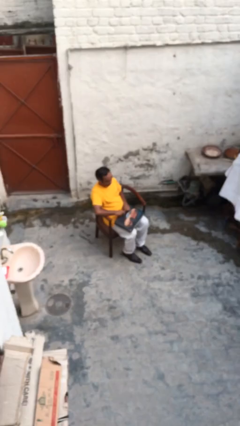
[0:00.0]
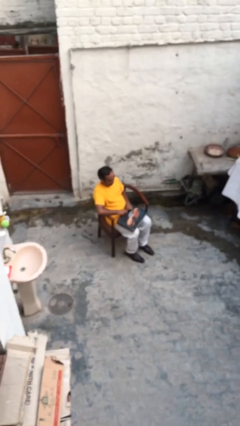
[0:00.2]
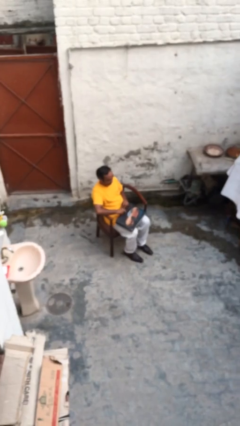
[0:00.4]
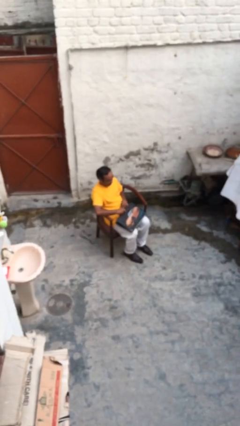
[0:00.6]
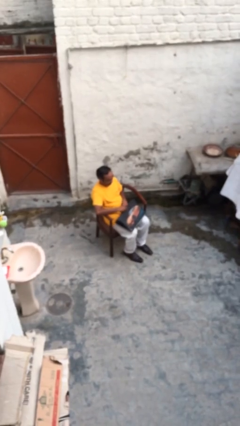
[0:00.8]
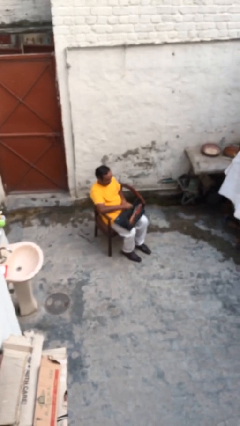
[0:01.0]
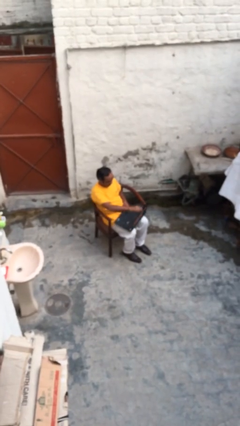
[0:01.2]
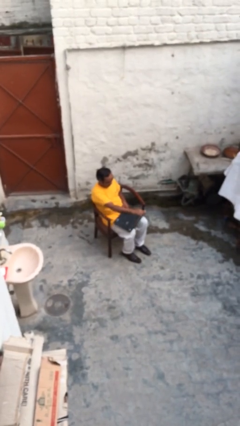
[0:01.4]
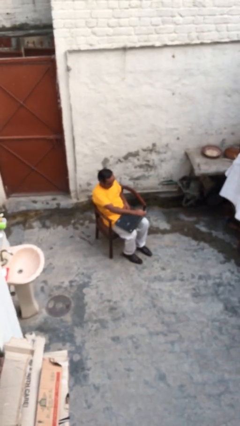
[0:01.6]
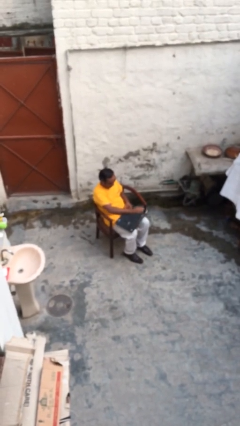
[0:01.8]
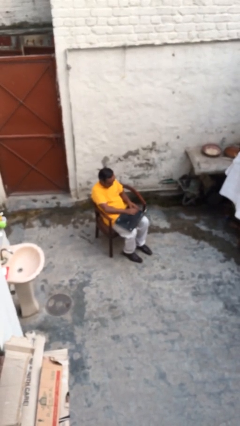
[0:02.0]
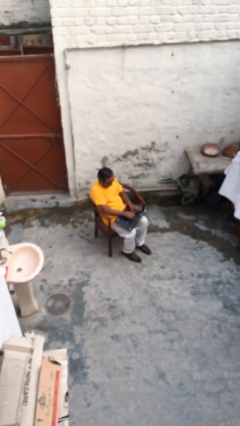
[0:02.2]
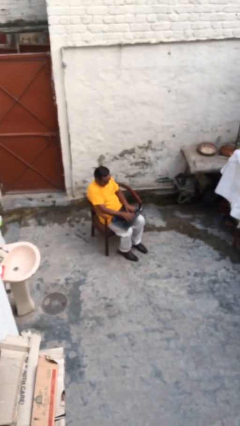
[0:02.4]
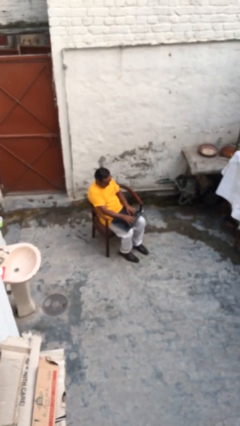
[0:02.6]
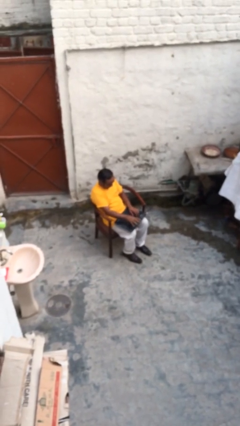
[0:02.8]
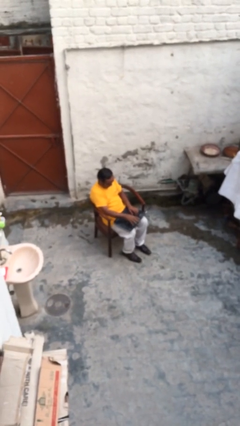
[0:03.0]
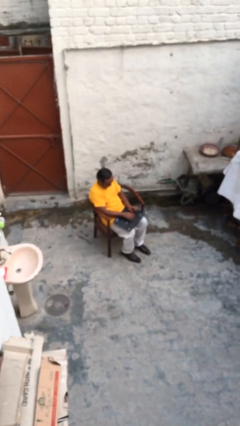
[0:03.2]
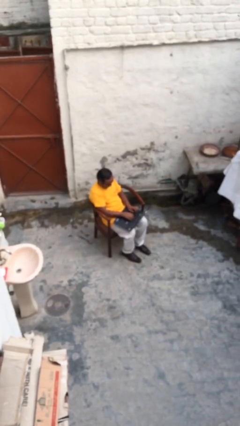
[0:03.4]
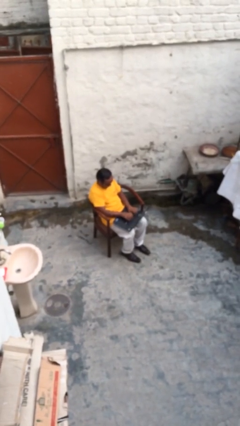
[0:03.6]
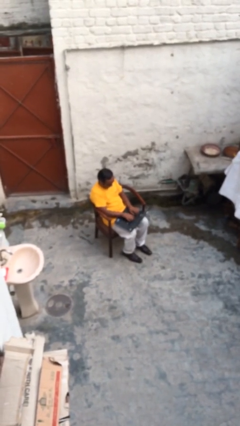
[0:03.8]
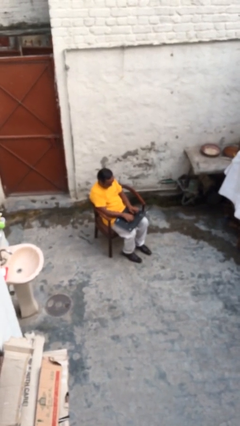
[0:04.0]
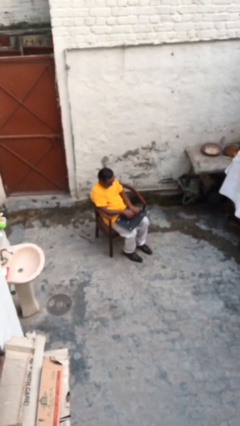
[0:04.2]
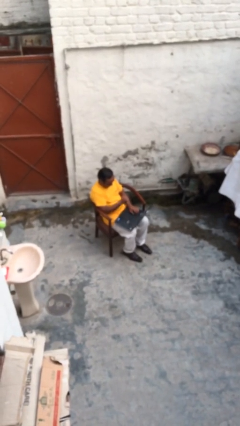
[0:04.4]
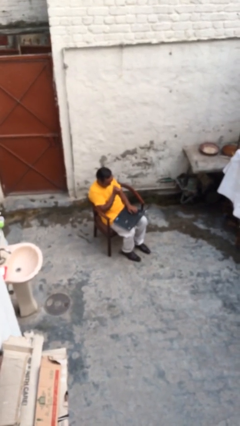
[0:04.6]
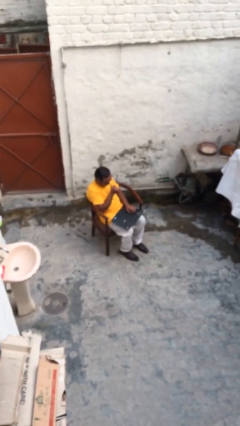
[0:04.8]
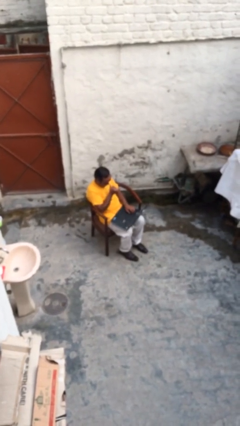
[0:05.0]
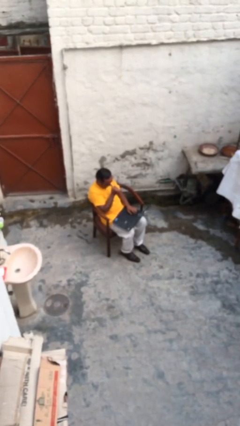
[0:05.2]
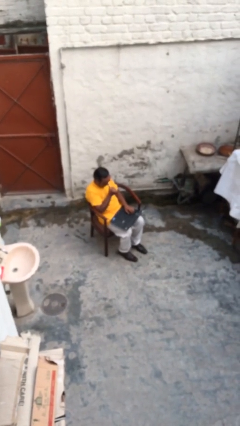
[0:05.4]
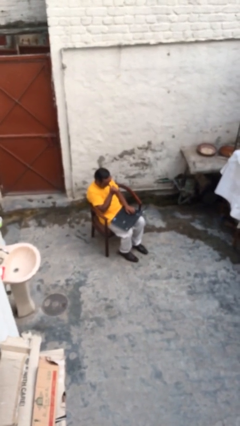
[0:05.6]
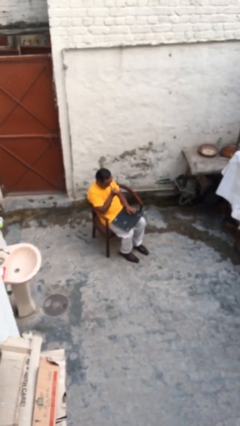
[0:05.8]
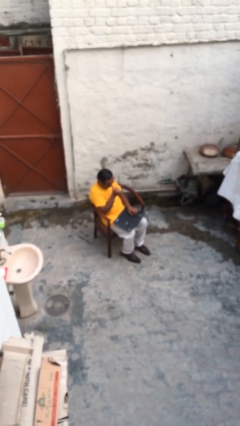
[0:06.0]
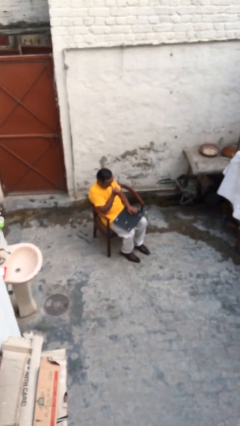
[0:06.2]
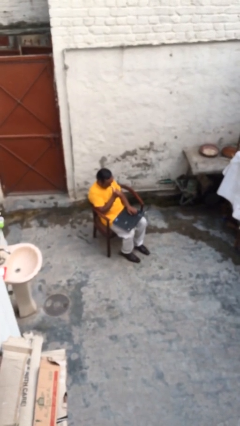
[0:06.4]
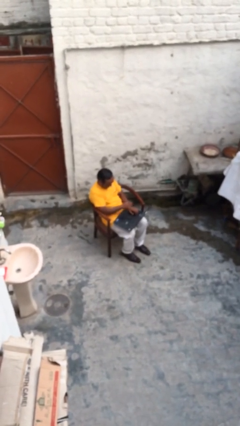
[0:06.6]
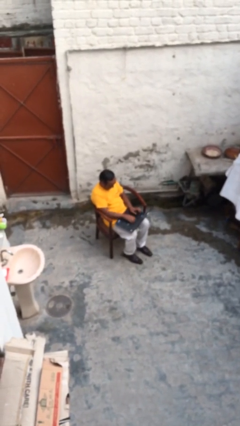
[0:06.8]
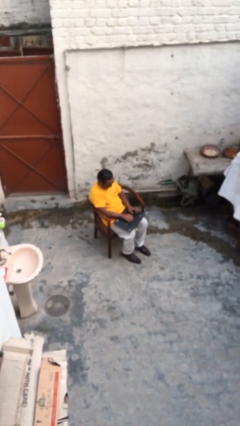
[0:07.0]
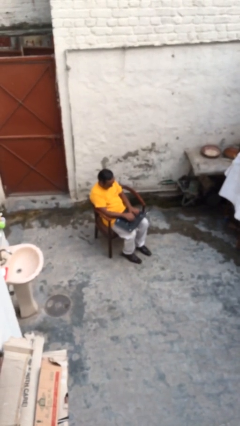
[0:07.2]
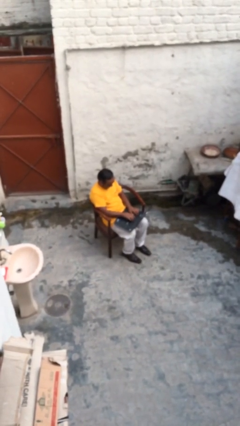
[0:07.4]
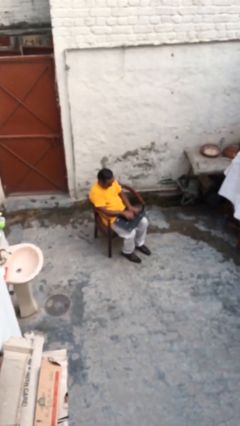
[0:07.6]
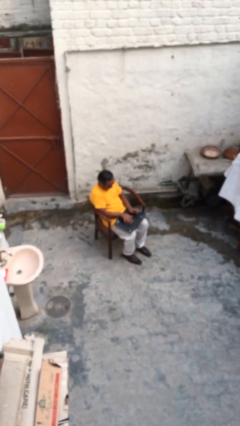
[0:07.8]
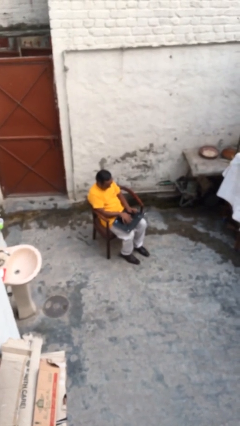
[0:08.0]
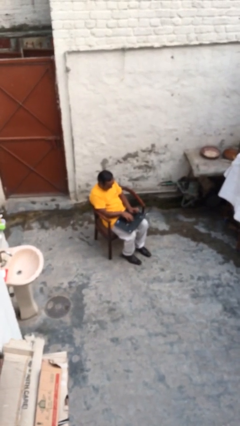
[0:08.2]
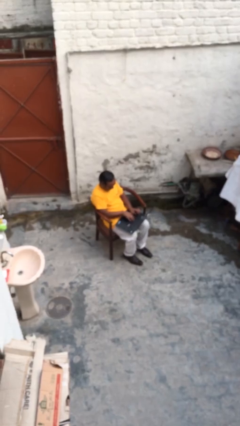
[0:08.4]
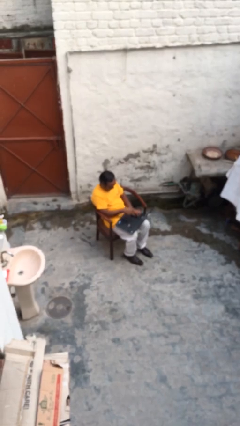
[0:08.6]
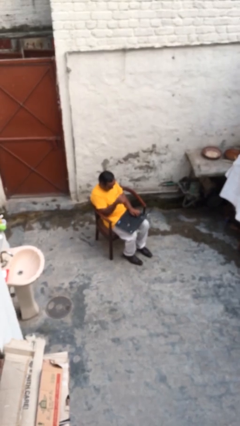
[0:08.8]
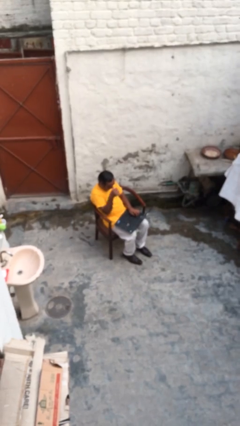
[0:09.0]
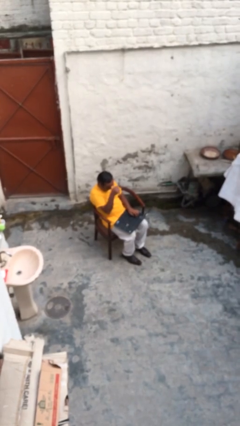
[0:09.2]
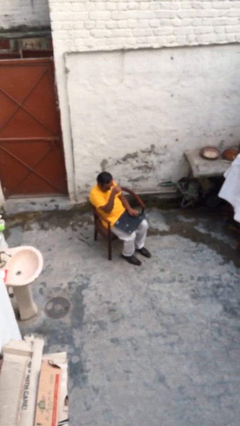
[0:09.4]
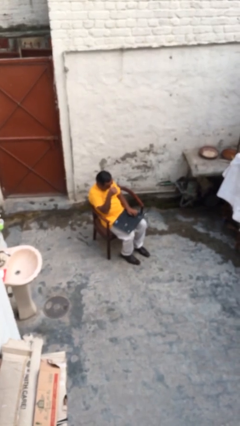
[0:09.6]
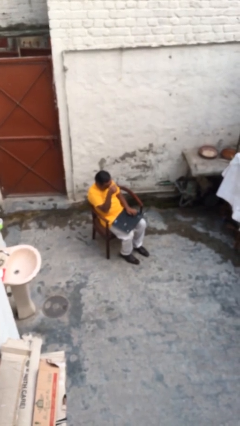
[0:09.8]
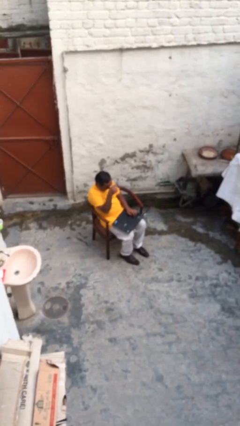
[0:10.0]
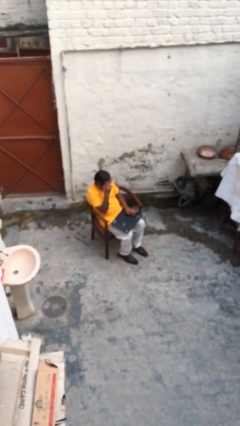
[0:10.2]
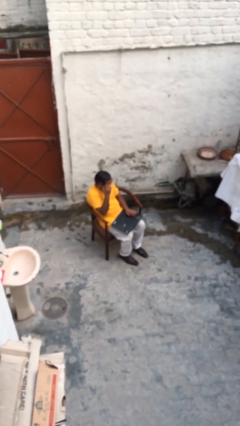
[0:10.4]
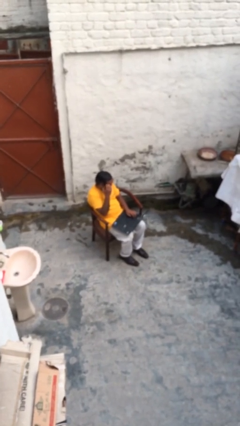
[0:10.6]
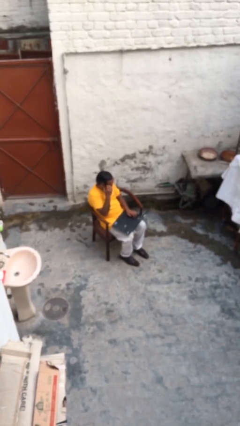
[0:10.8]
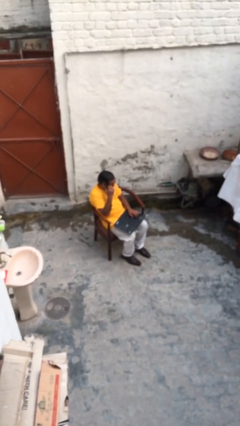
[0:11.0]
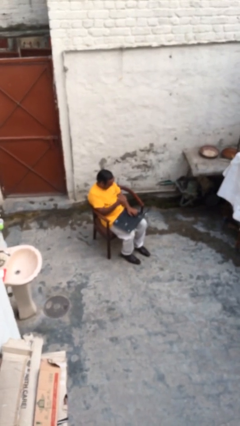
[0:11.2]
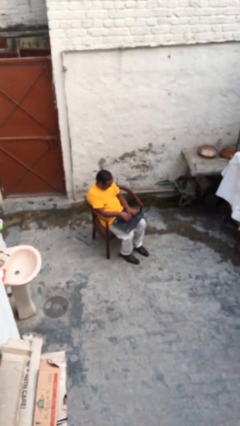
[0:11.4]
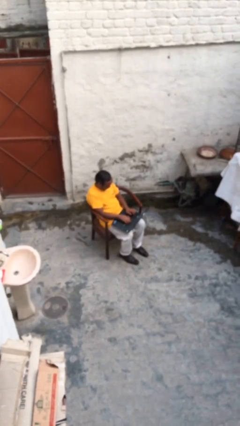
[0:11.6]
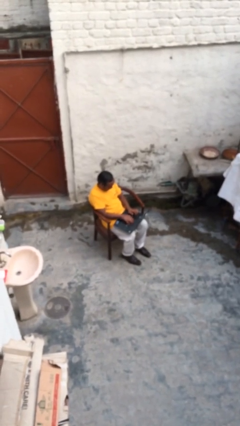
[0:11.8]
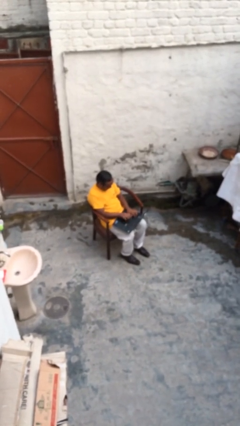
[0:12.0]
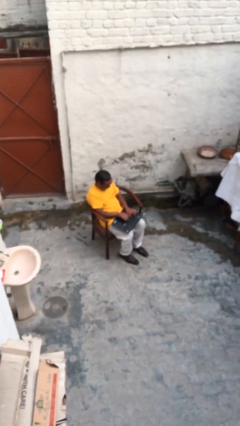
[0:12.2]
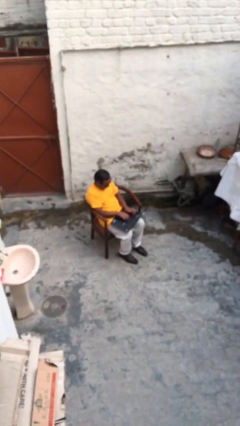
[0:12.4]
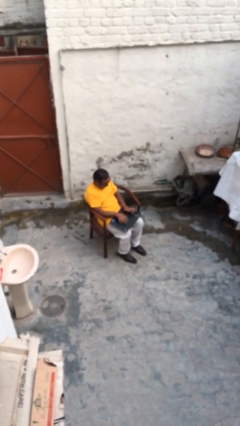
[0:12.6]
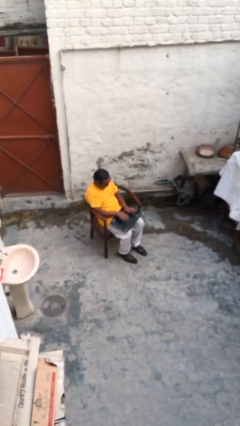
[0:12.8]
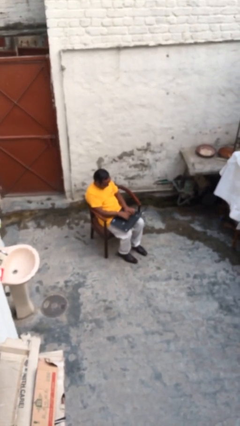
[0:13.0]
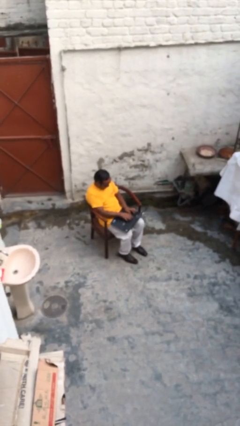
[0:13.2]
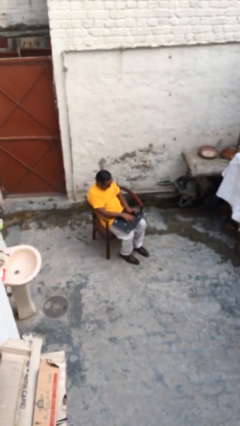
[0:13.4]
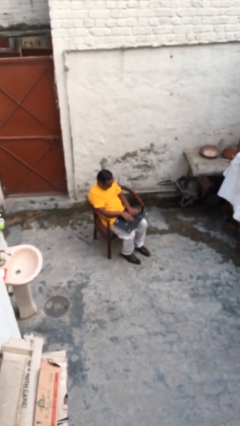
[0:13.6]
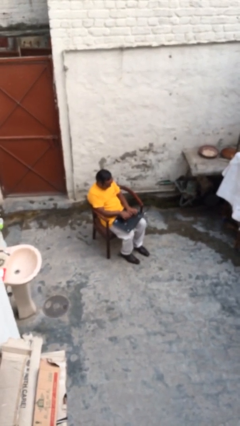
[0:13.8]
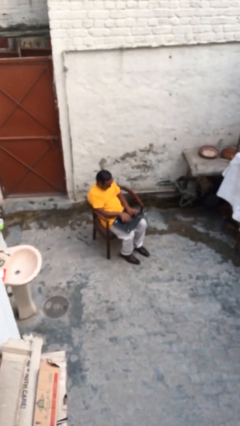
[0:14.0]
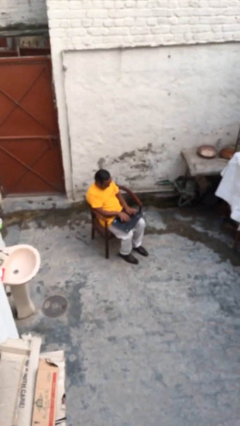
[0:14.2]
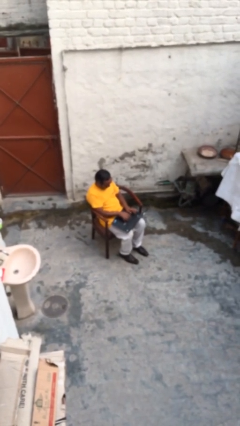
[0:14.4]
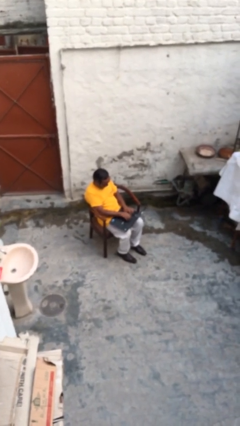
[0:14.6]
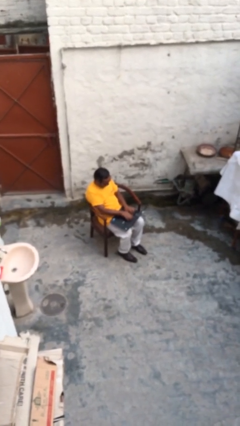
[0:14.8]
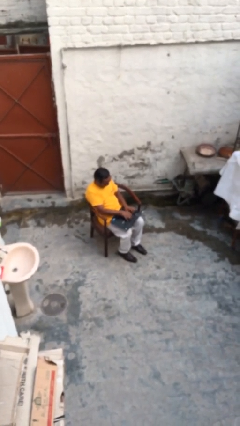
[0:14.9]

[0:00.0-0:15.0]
person interacts with laptop

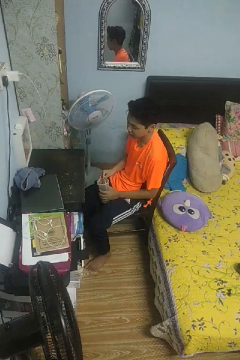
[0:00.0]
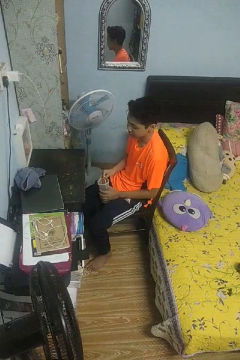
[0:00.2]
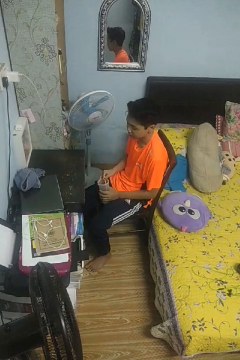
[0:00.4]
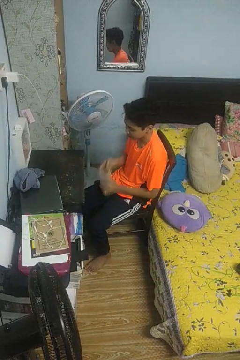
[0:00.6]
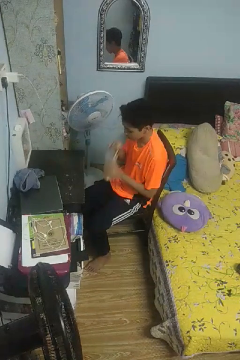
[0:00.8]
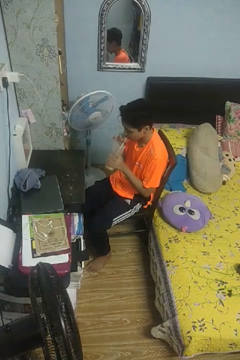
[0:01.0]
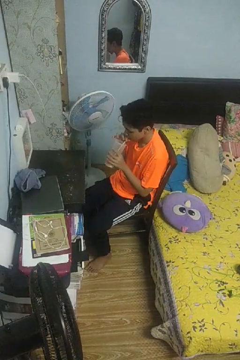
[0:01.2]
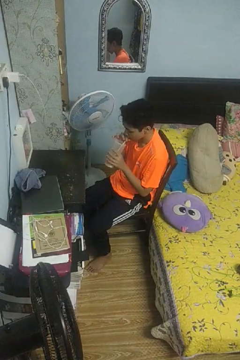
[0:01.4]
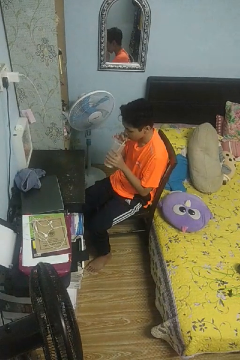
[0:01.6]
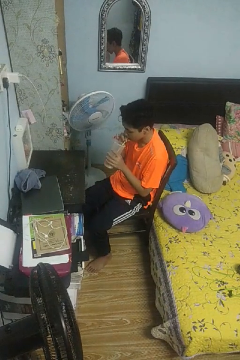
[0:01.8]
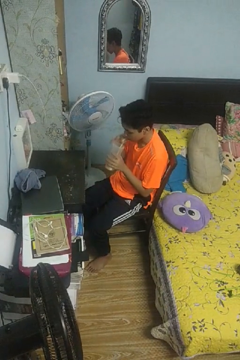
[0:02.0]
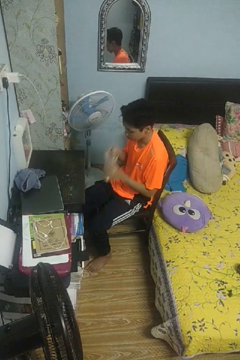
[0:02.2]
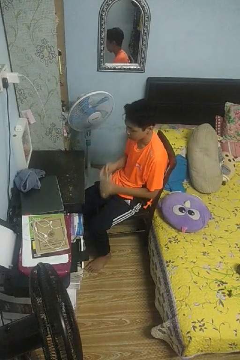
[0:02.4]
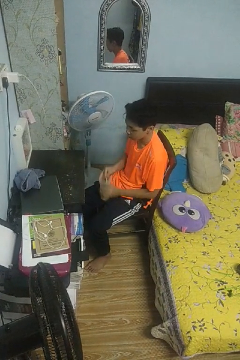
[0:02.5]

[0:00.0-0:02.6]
person drinks from straw

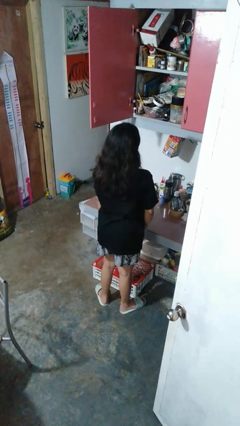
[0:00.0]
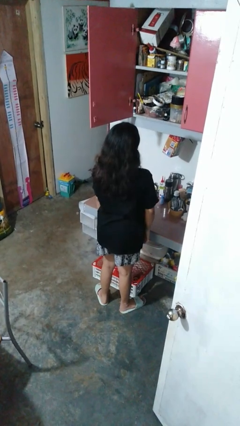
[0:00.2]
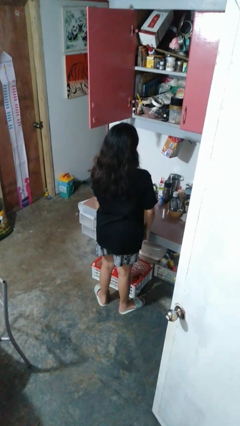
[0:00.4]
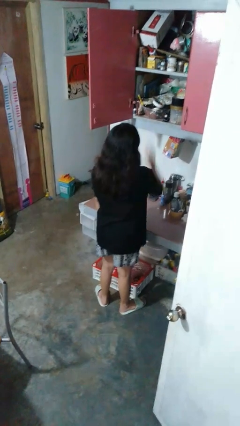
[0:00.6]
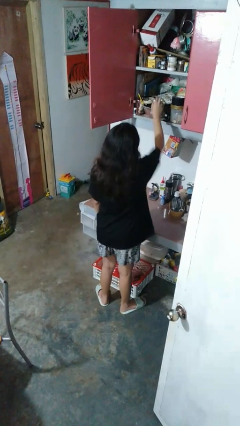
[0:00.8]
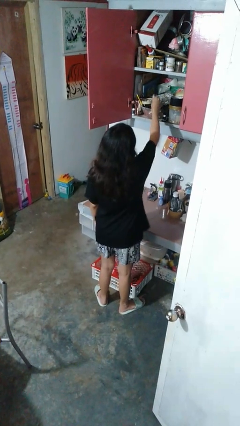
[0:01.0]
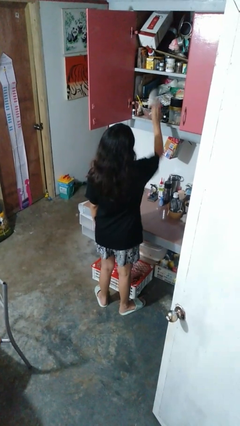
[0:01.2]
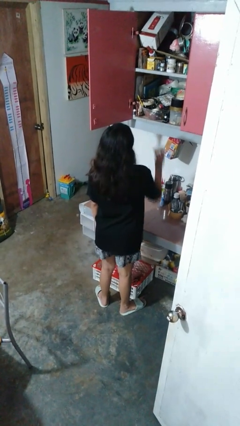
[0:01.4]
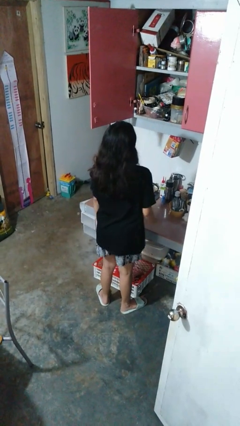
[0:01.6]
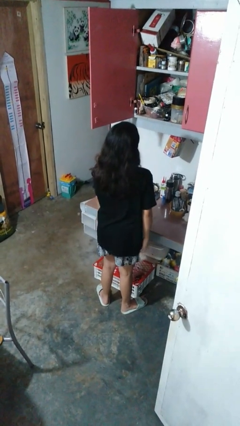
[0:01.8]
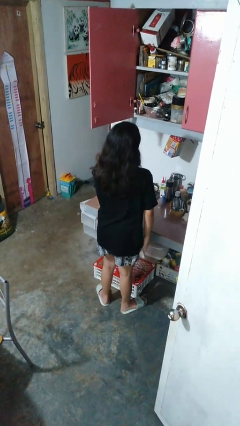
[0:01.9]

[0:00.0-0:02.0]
person takes object from cabinet
